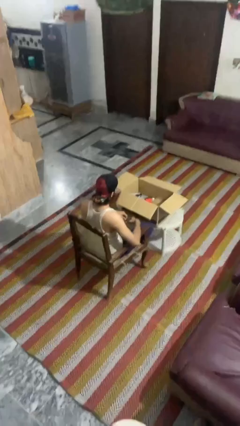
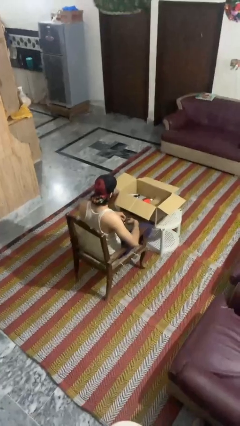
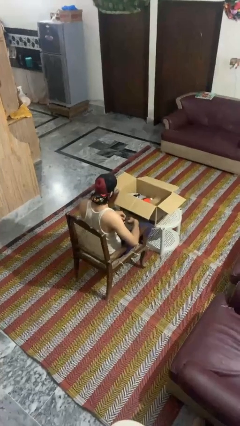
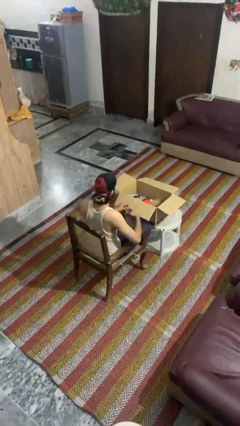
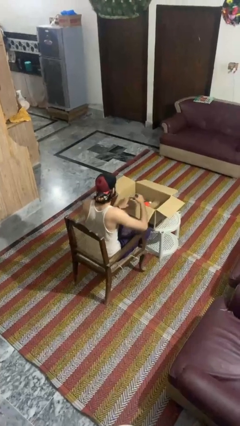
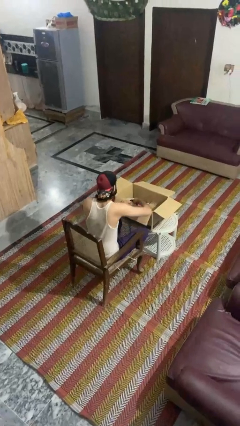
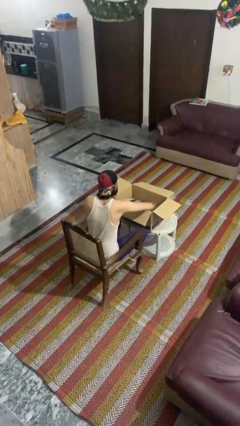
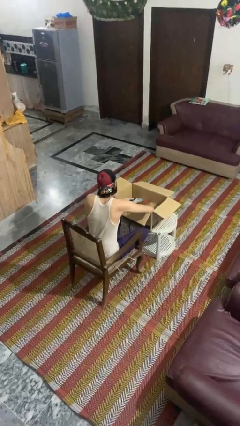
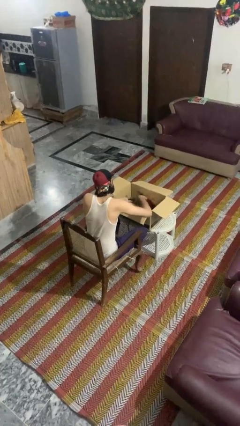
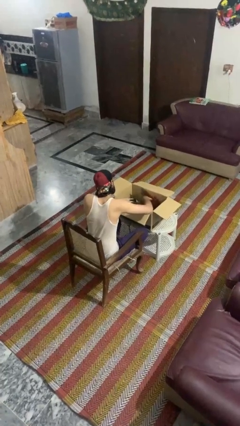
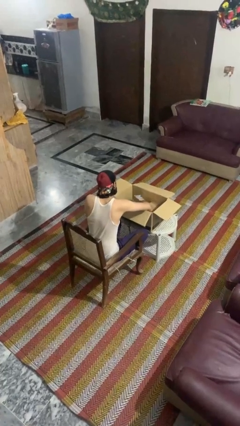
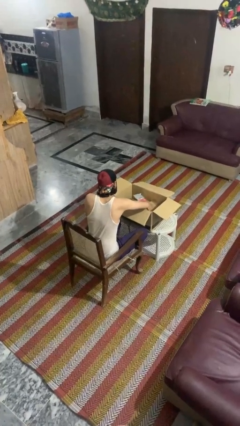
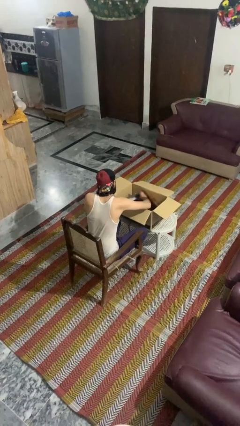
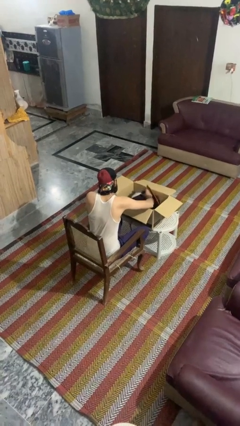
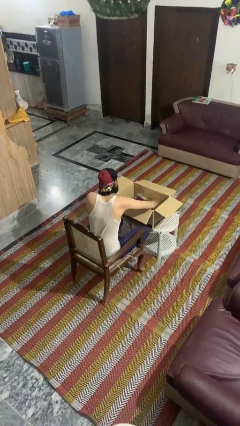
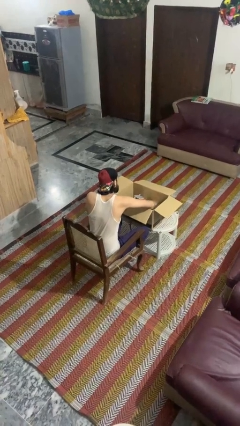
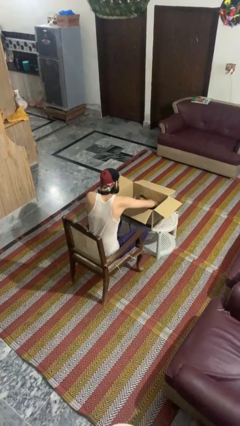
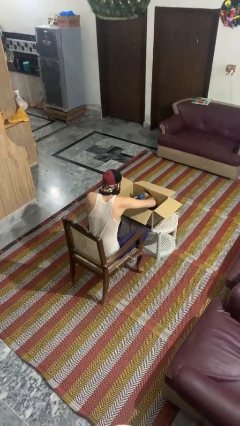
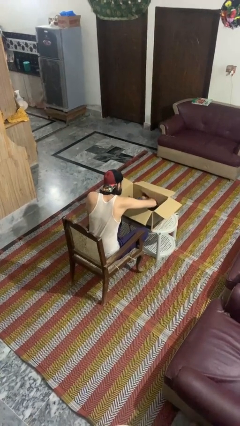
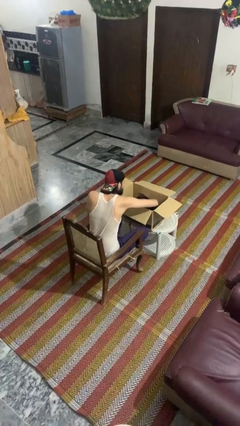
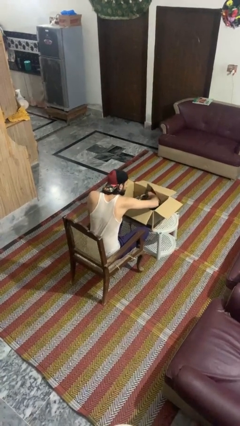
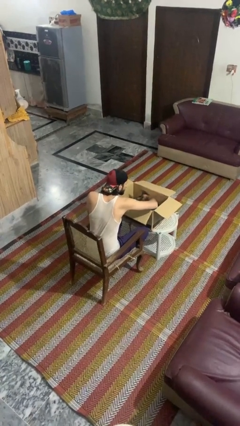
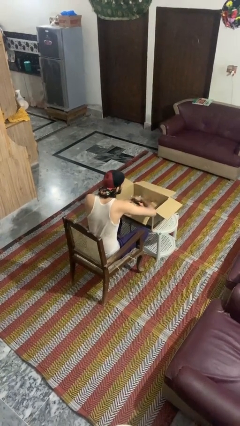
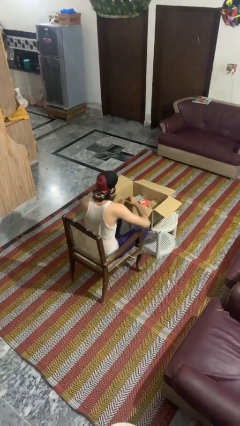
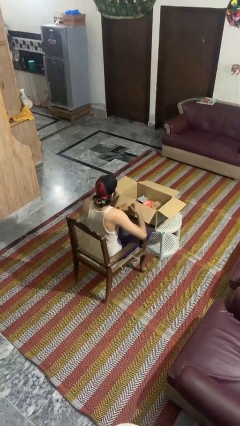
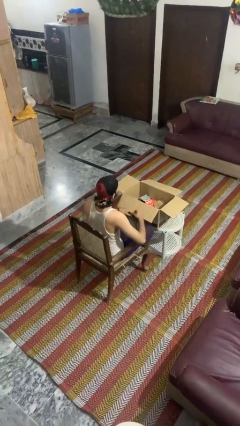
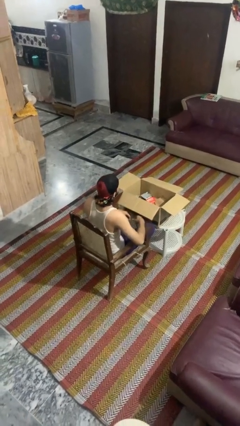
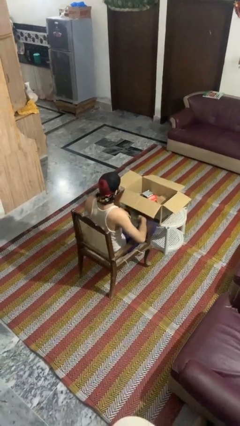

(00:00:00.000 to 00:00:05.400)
person searches in box

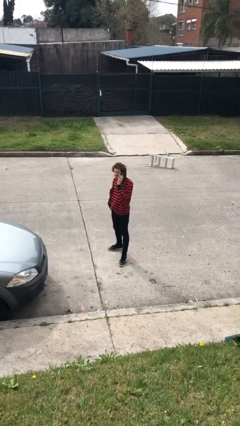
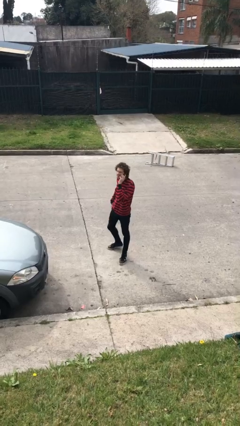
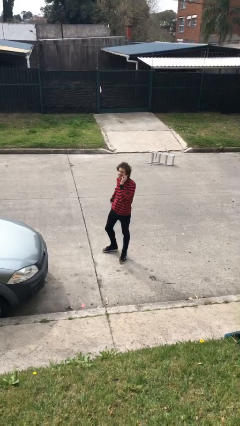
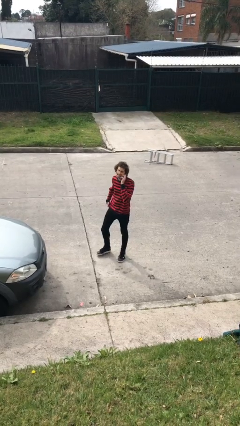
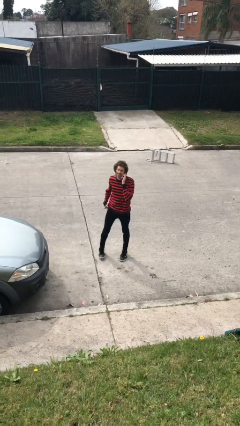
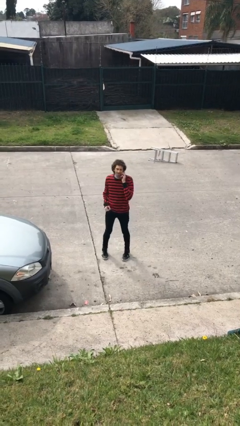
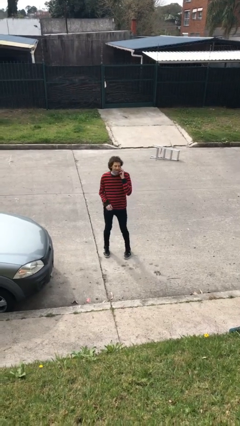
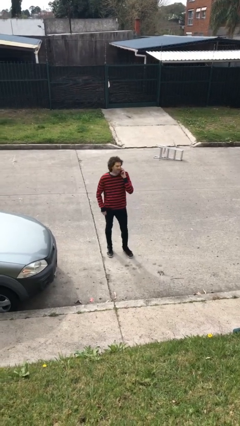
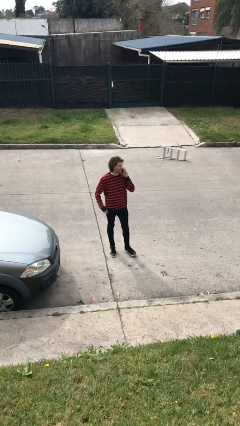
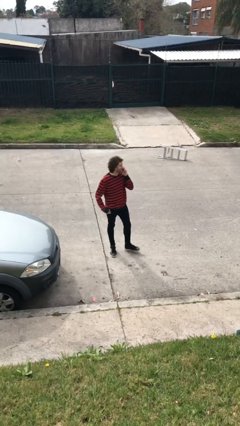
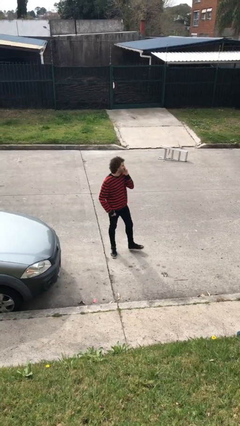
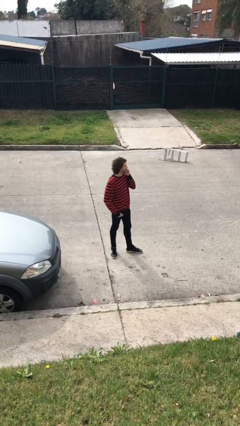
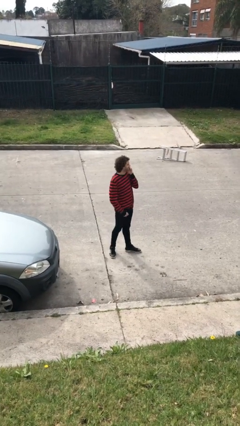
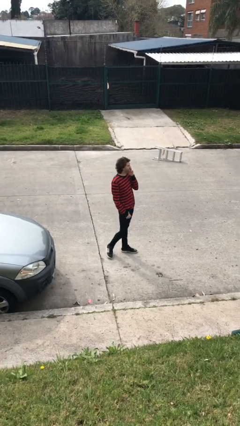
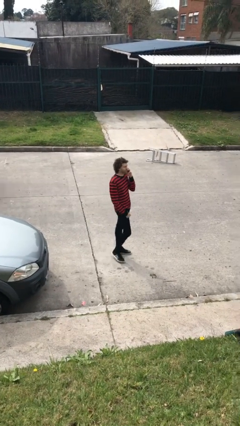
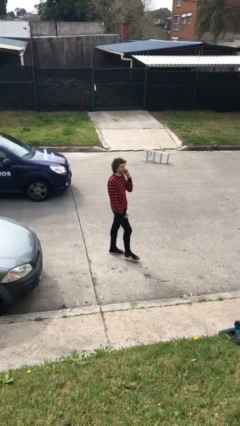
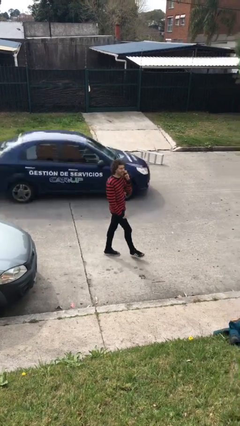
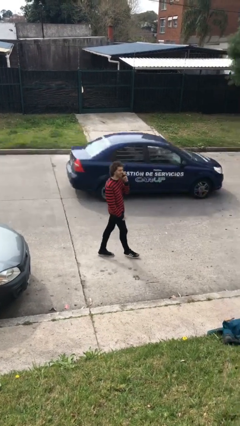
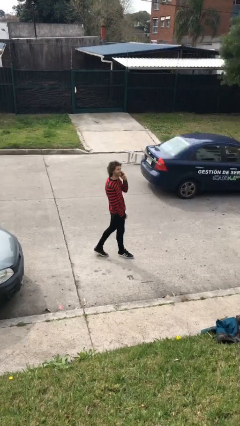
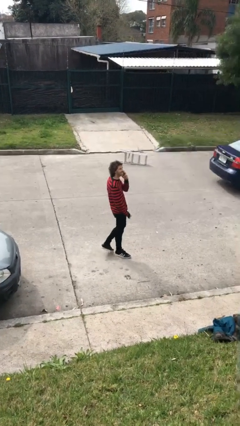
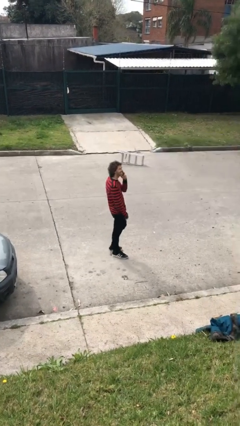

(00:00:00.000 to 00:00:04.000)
person talks on phone

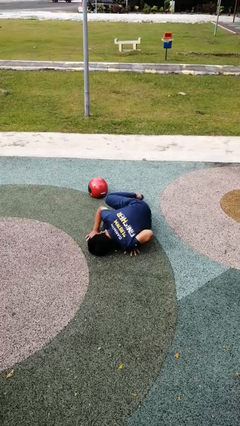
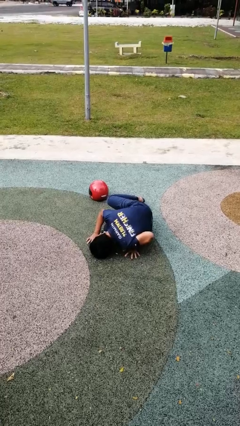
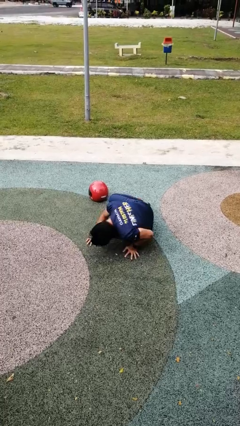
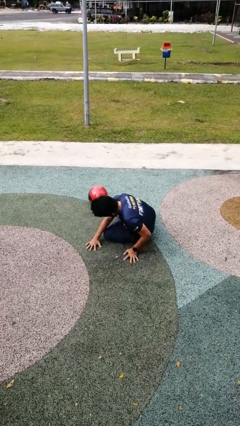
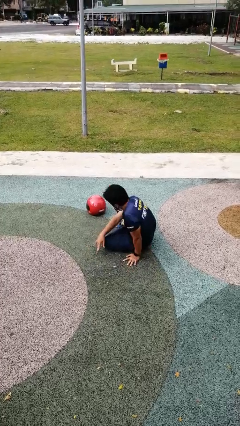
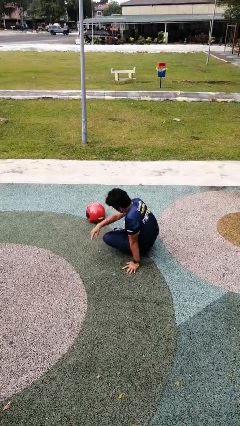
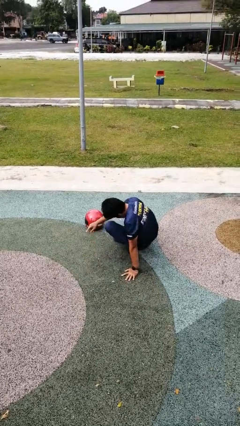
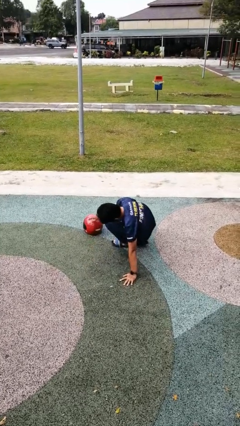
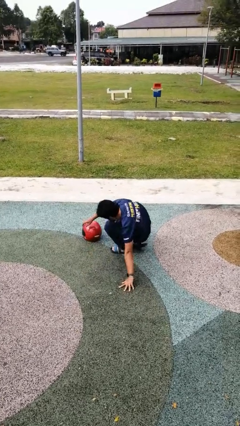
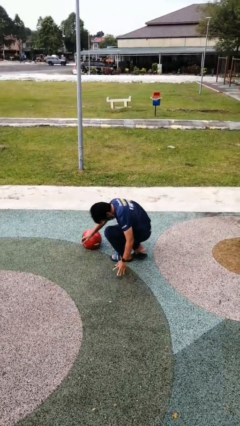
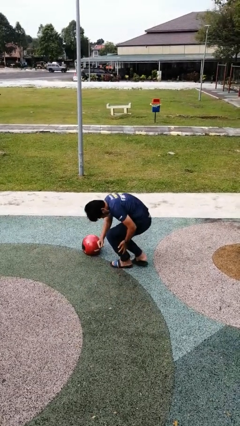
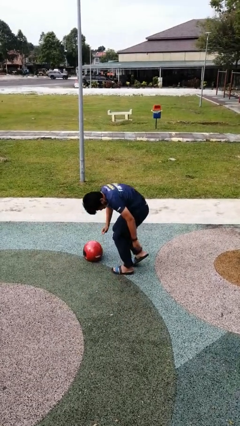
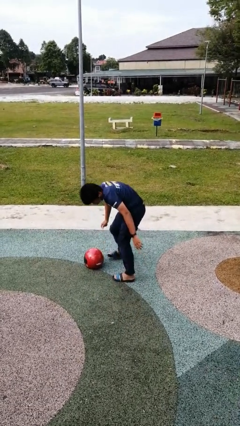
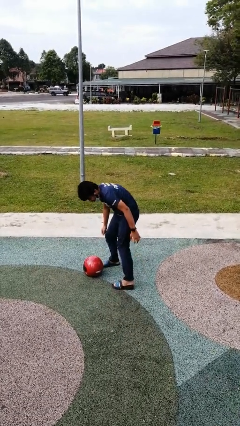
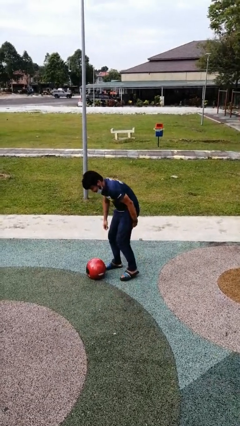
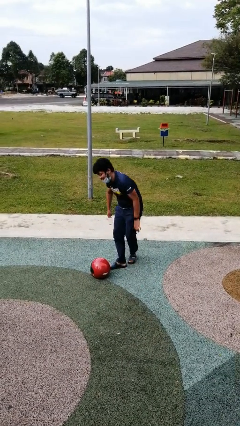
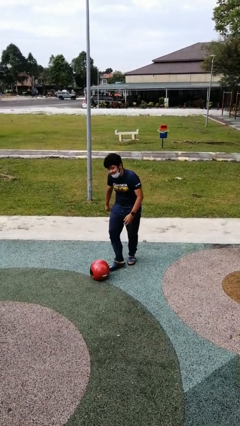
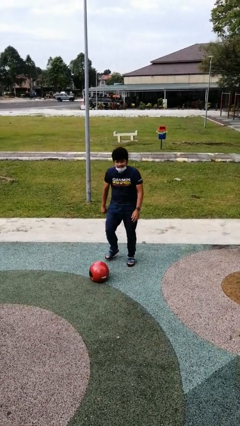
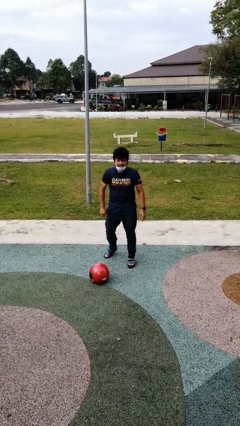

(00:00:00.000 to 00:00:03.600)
person stands up from floor

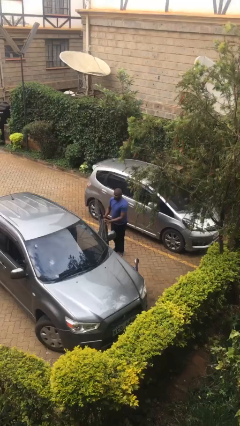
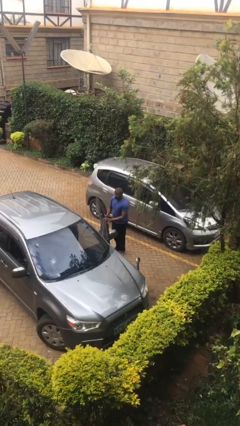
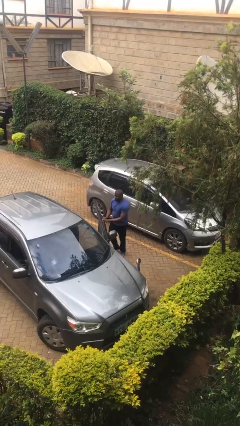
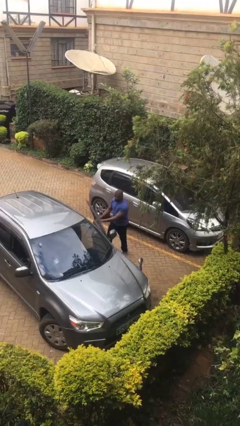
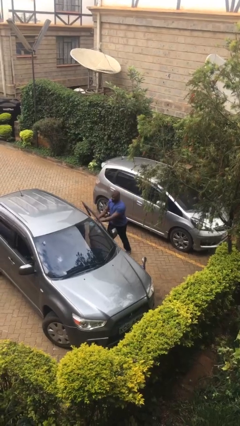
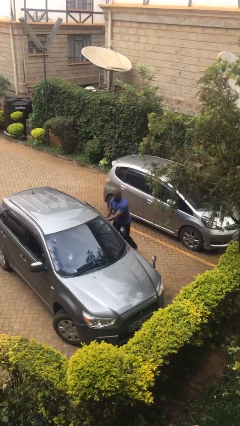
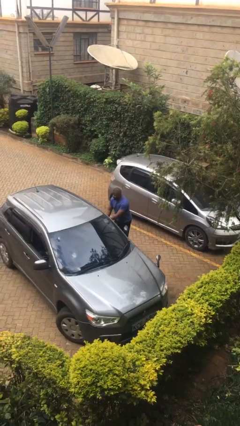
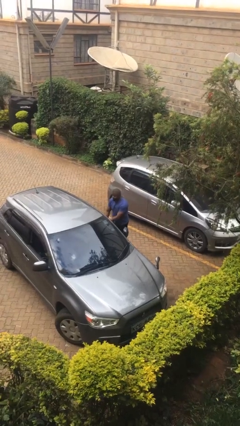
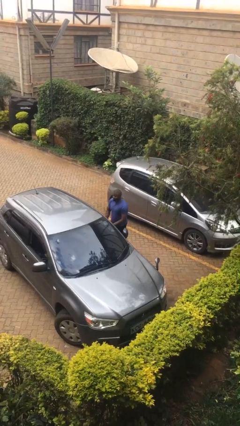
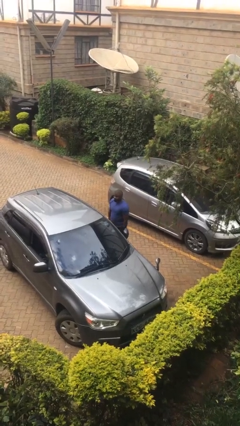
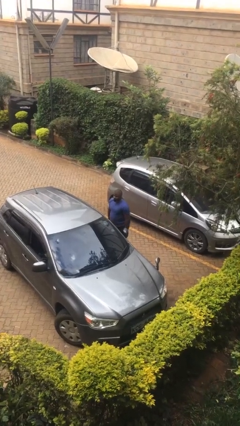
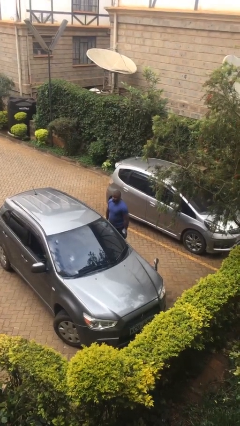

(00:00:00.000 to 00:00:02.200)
person closes car door

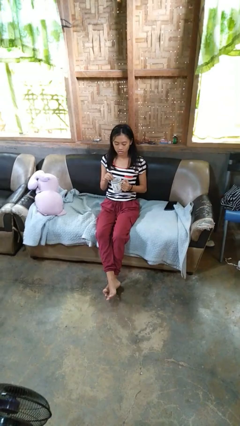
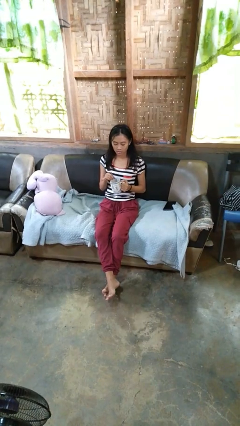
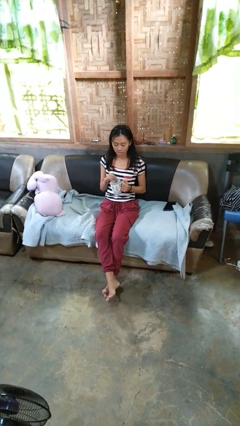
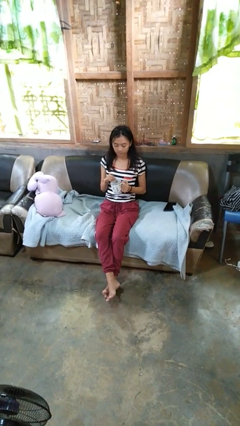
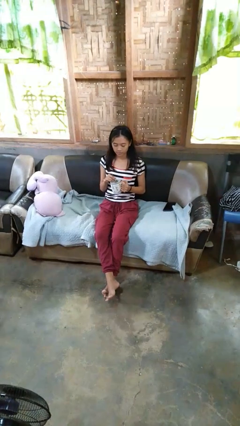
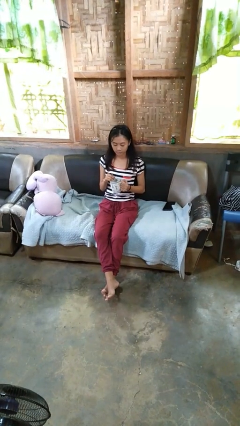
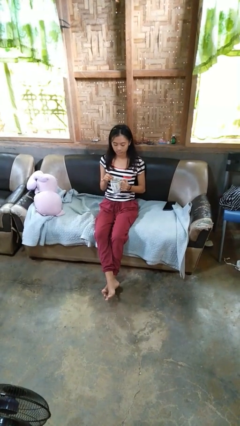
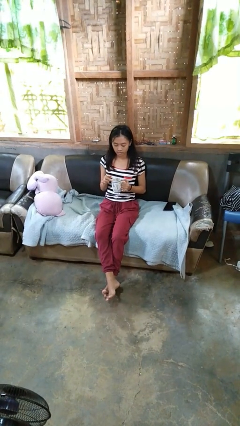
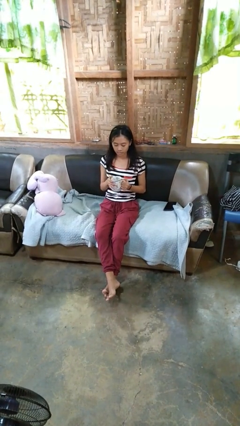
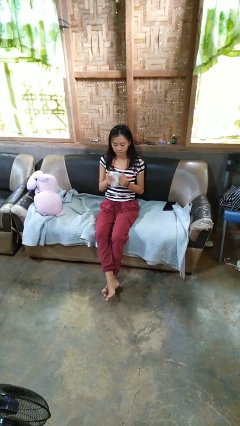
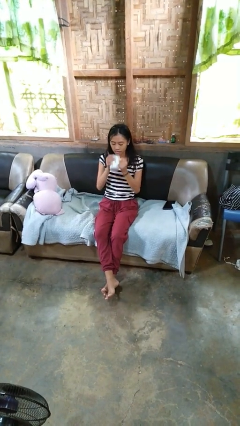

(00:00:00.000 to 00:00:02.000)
person stirs mug
